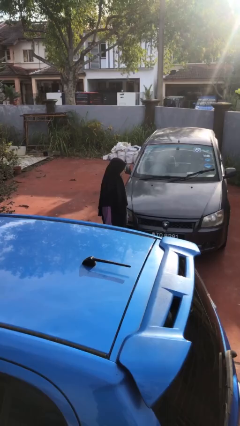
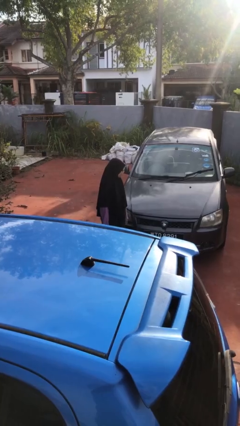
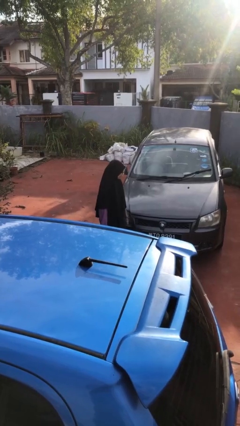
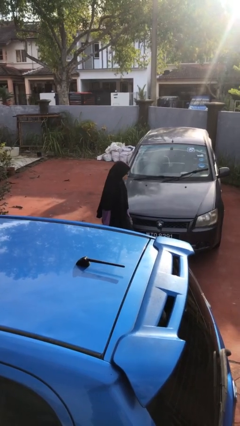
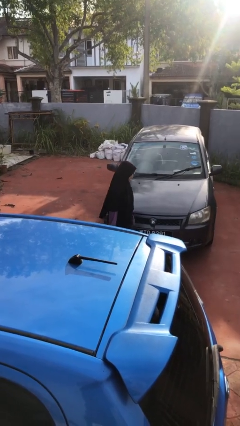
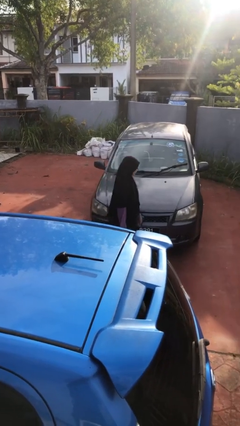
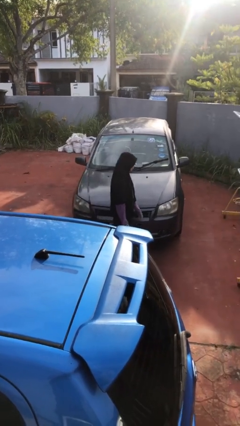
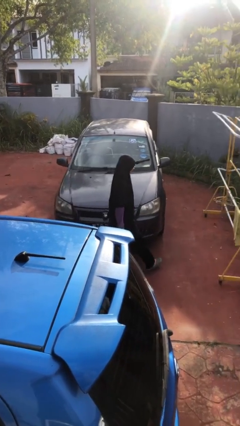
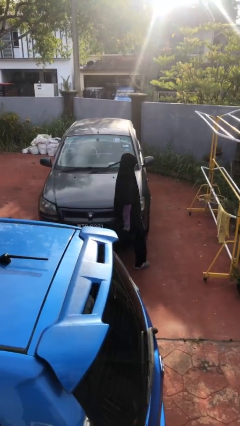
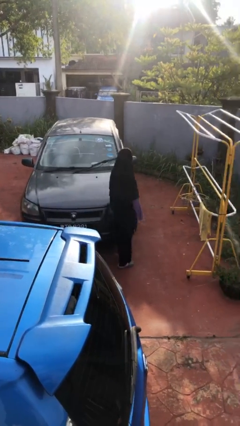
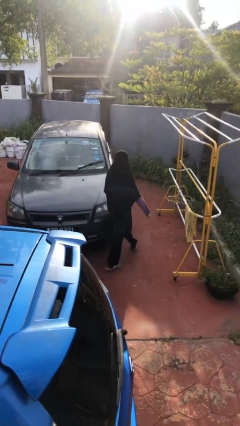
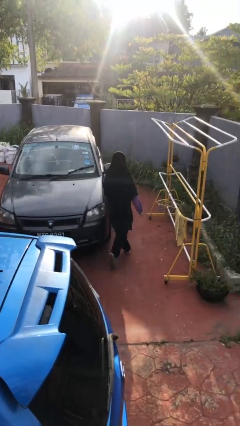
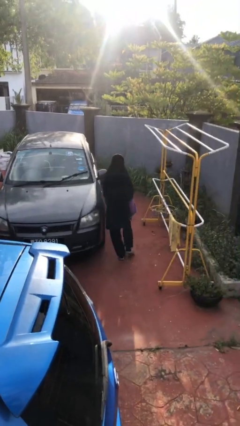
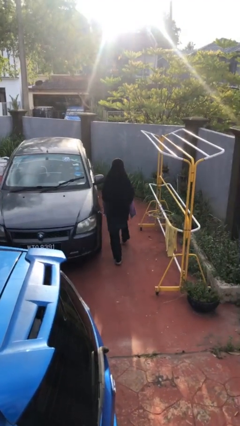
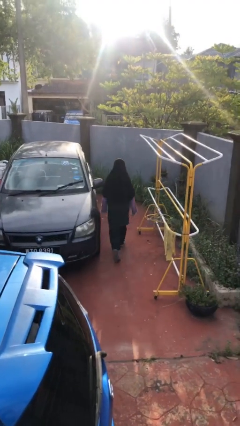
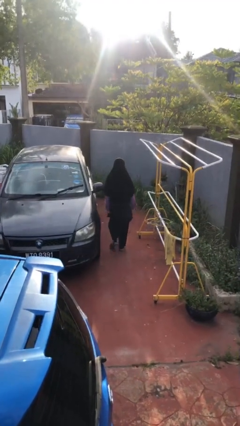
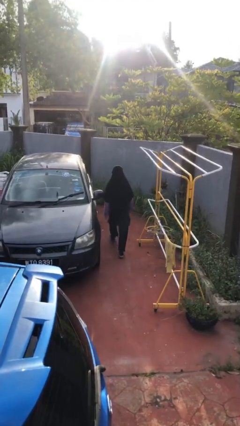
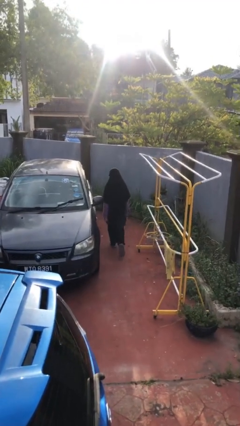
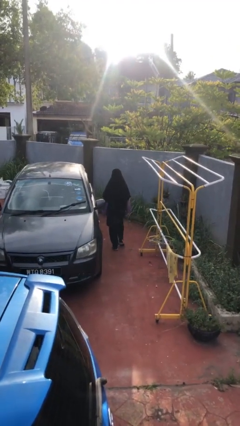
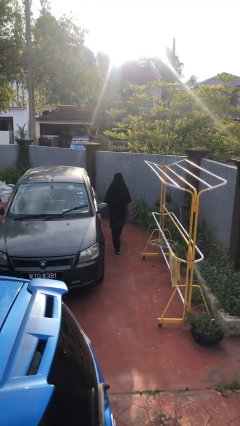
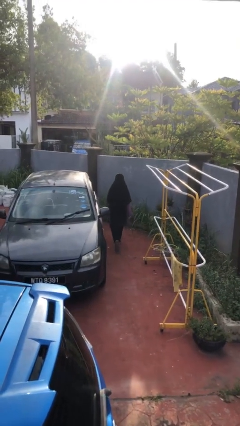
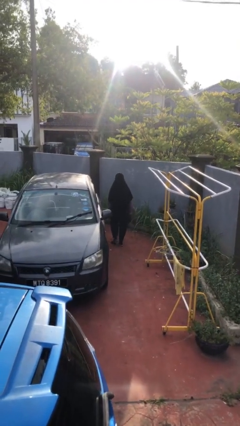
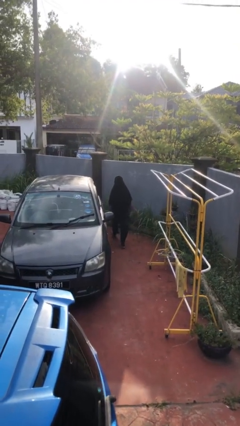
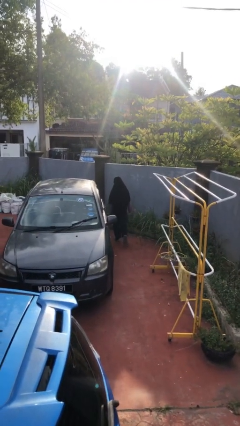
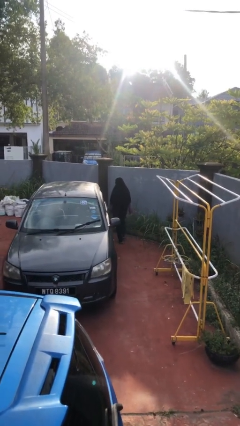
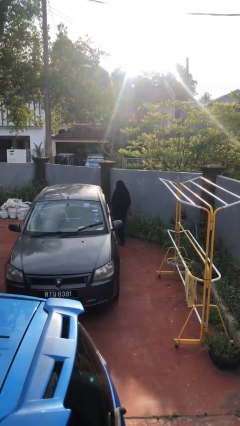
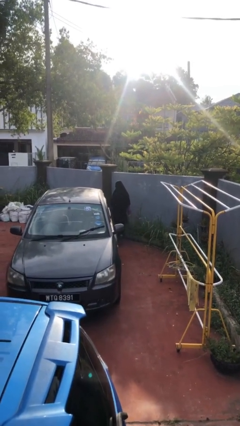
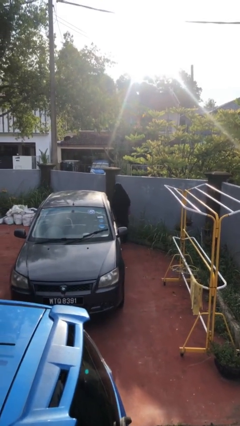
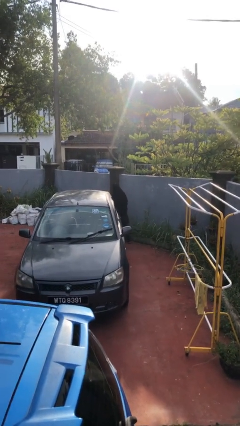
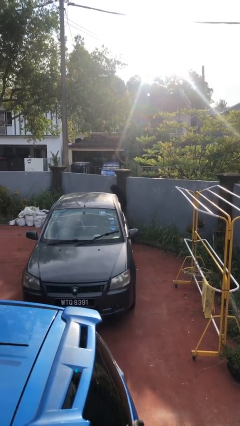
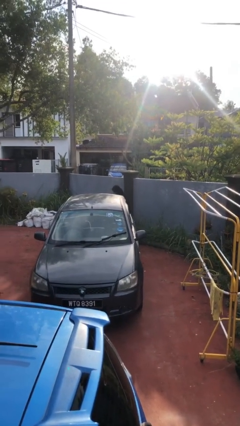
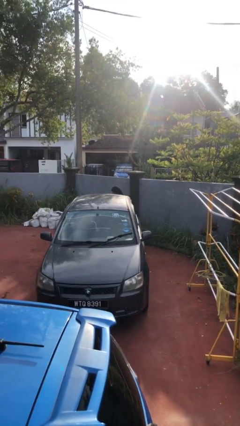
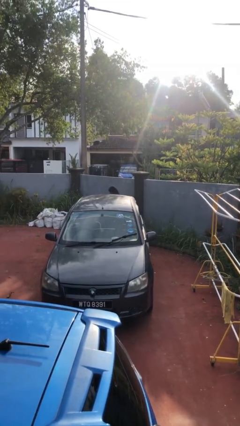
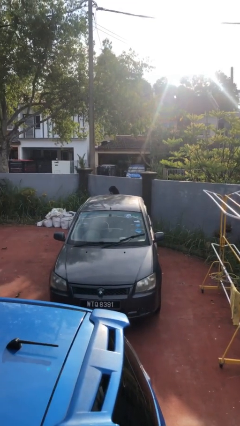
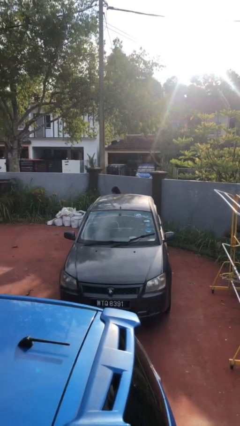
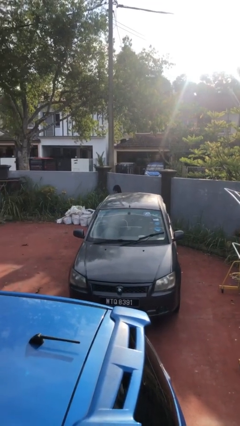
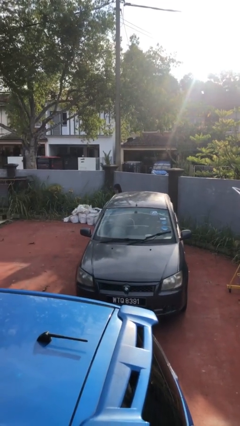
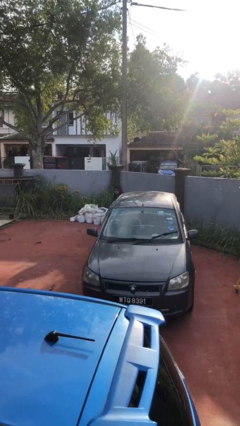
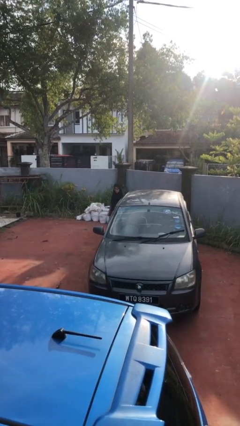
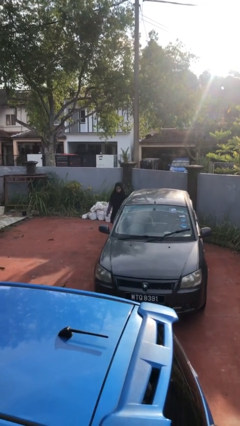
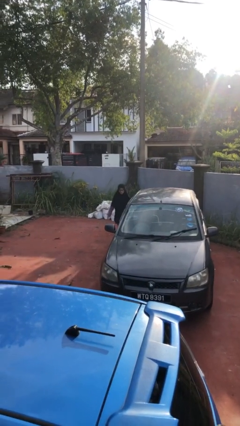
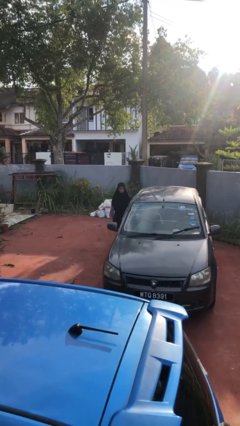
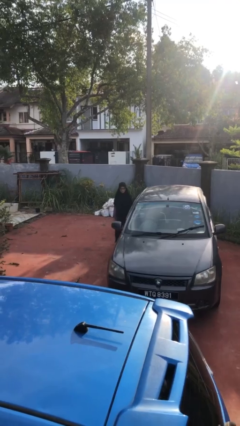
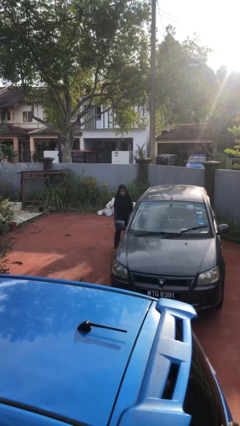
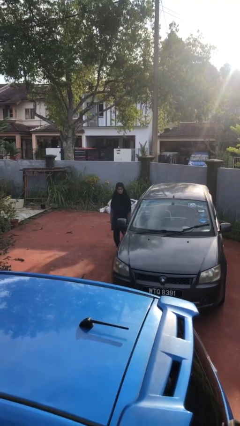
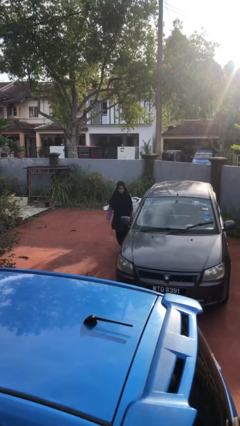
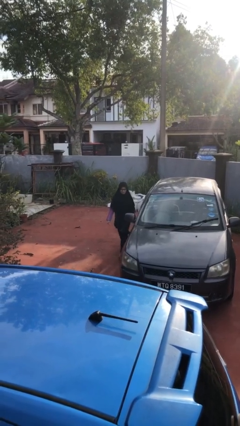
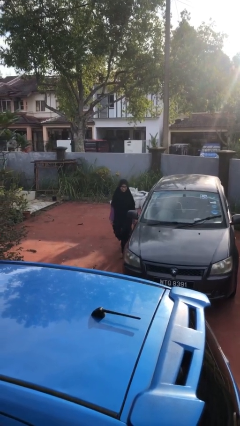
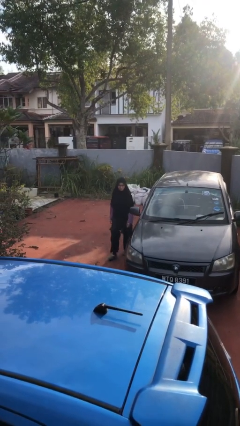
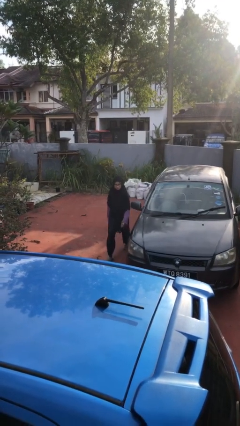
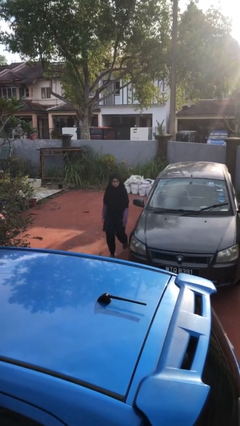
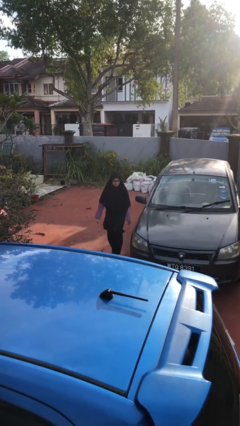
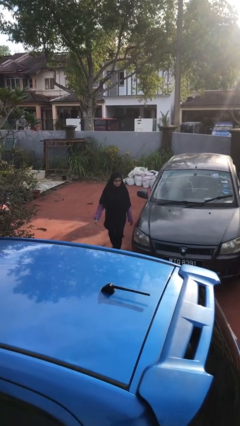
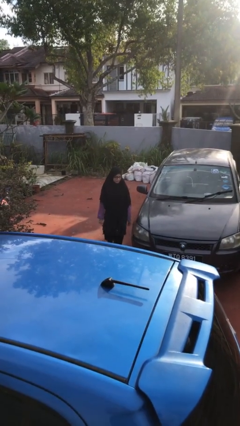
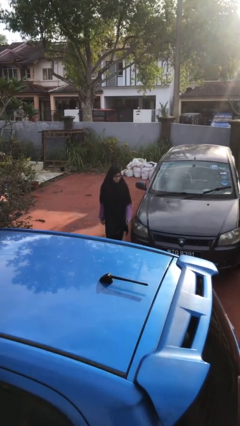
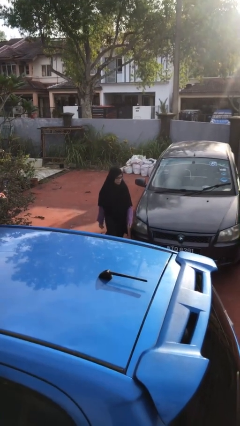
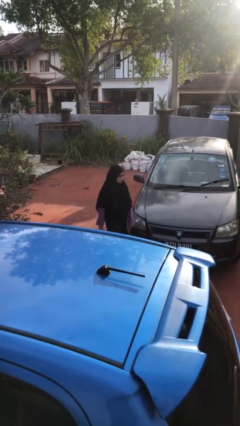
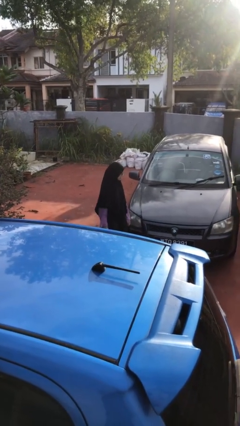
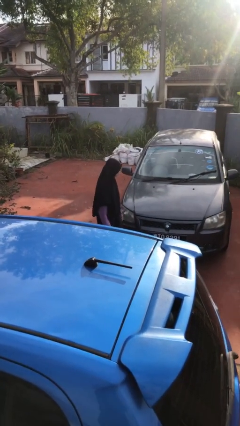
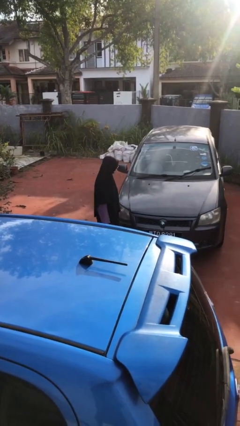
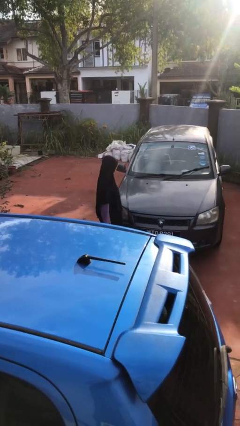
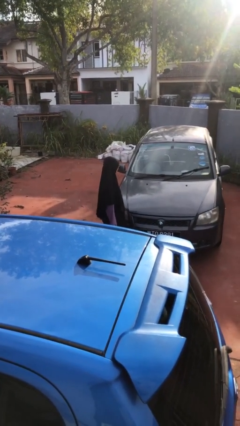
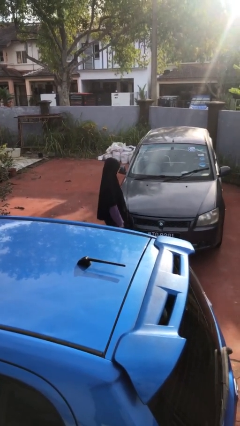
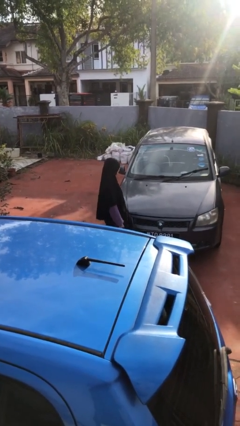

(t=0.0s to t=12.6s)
person walks around car

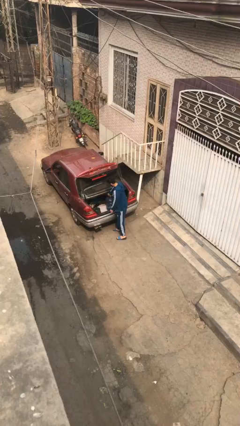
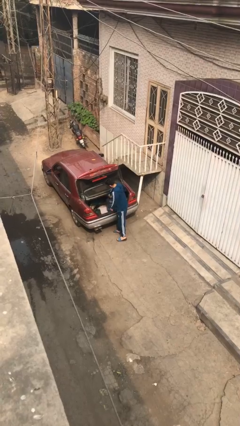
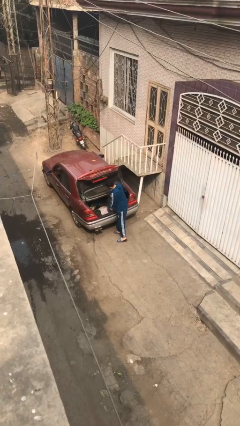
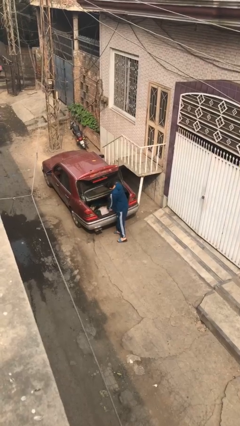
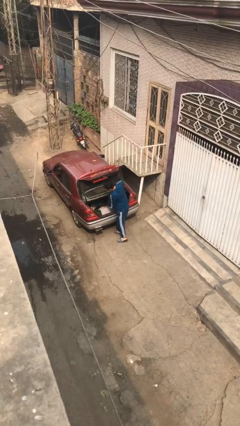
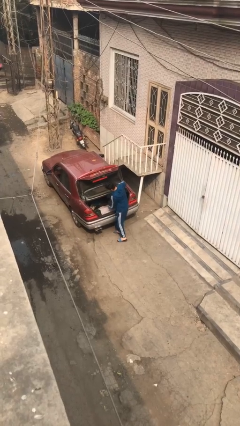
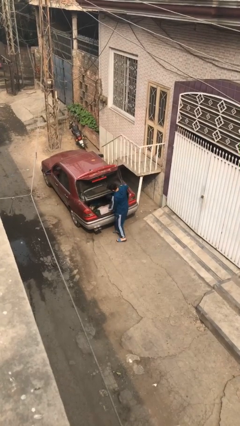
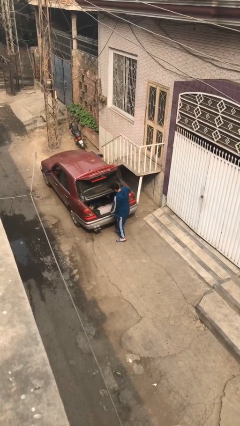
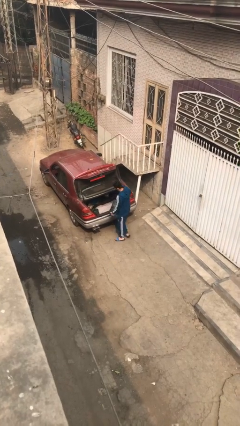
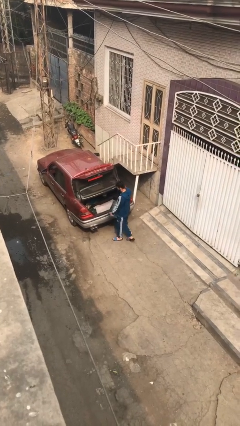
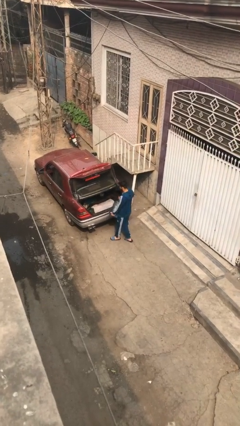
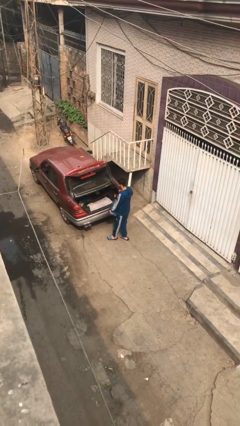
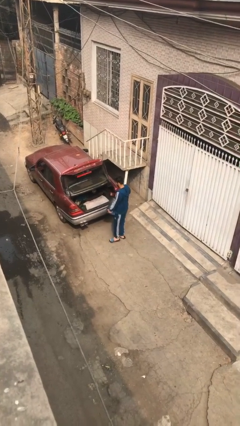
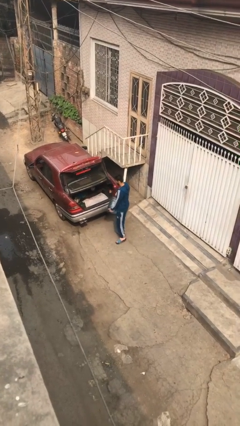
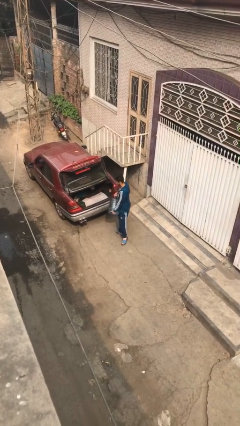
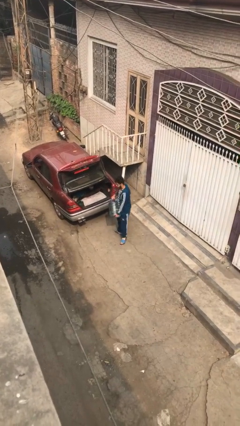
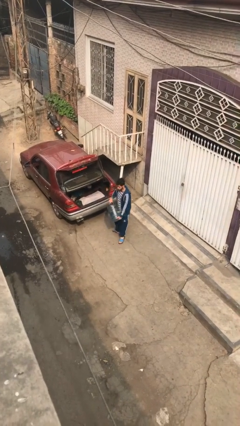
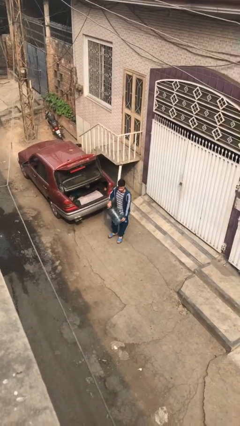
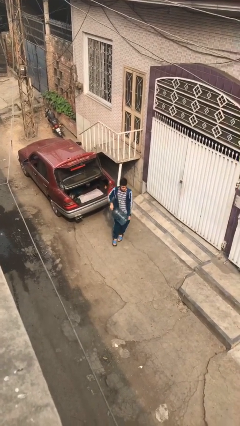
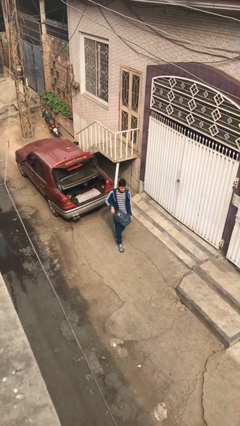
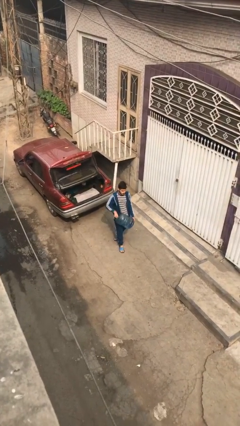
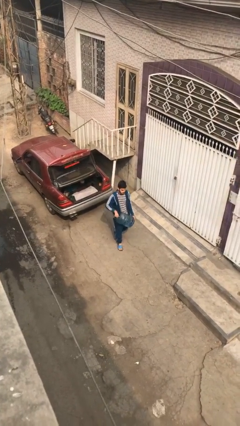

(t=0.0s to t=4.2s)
person unloads car

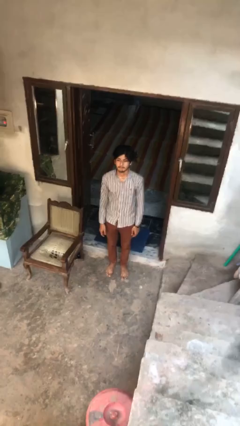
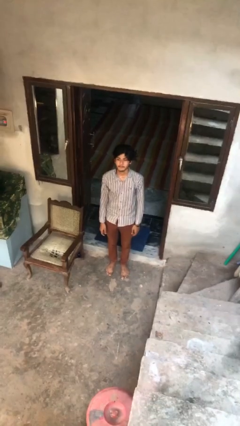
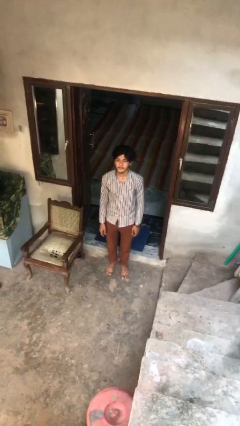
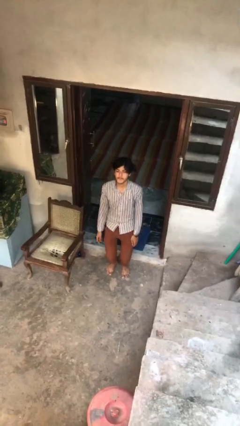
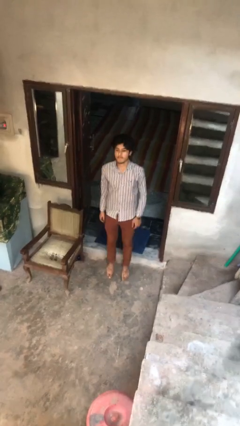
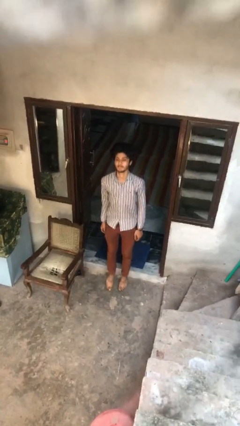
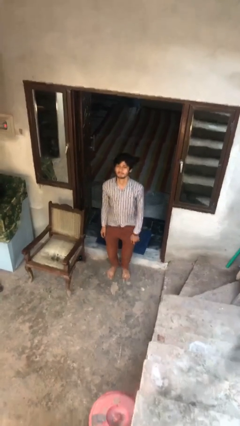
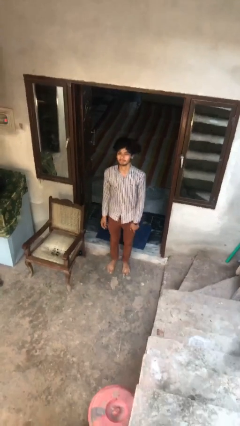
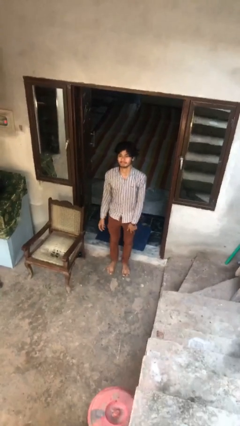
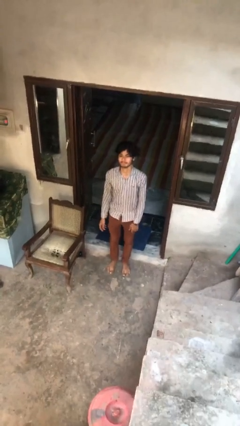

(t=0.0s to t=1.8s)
person jumps
